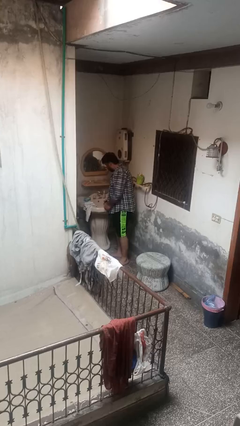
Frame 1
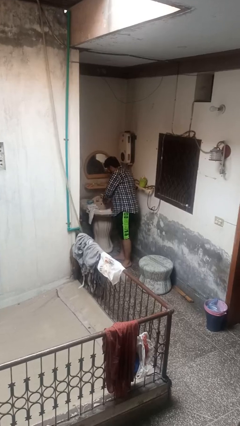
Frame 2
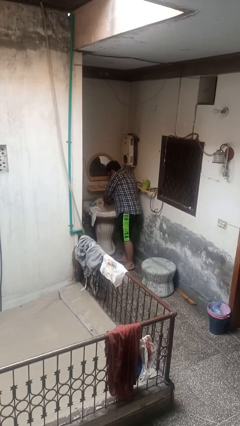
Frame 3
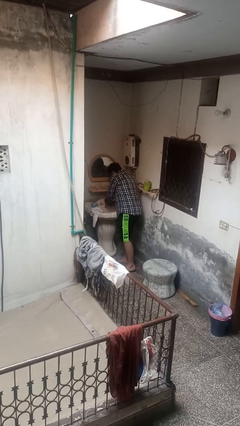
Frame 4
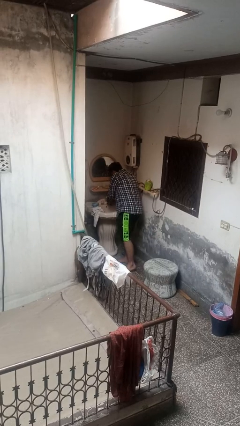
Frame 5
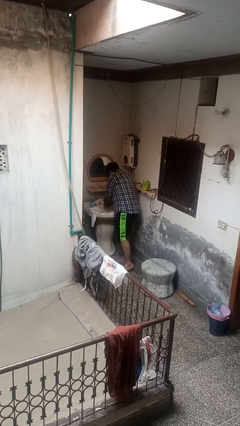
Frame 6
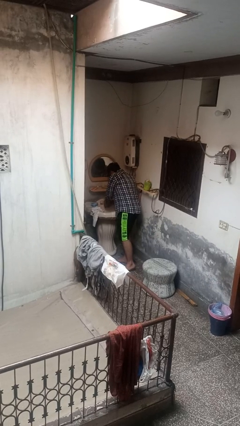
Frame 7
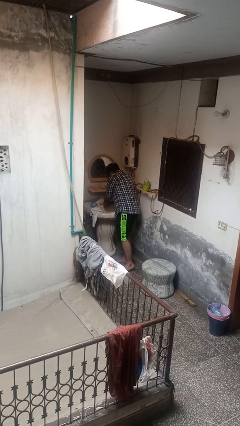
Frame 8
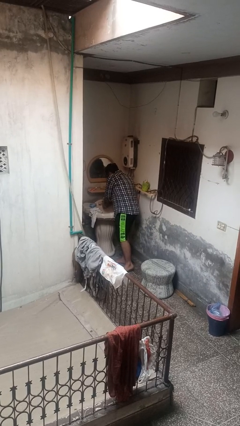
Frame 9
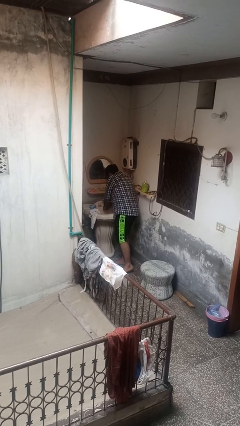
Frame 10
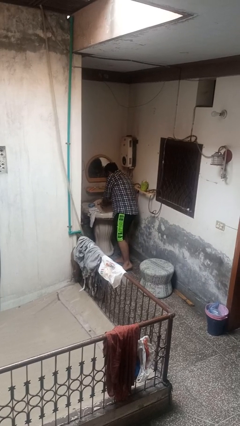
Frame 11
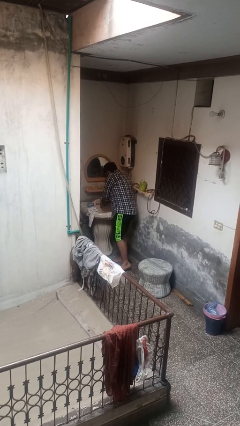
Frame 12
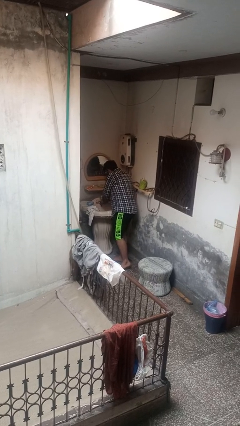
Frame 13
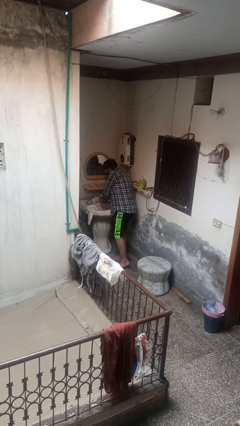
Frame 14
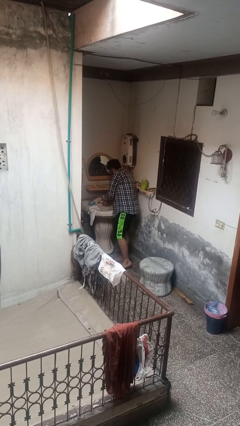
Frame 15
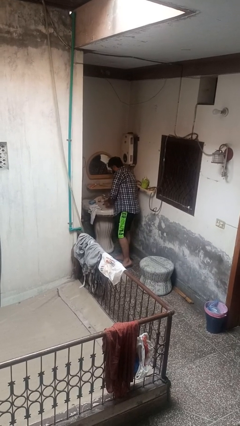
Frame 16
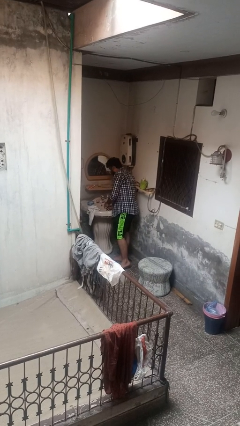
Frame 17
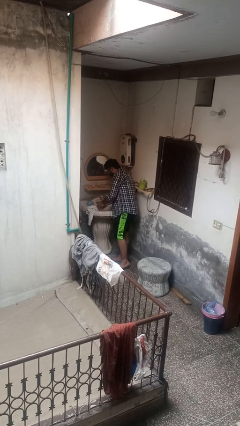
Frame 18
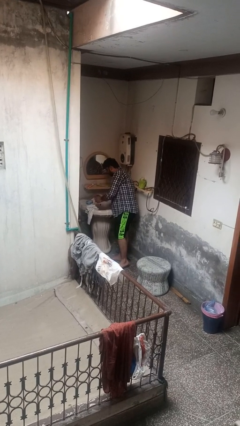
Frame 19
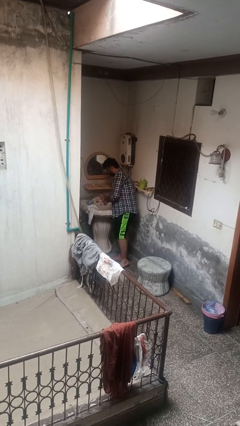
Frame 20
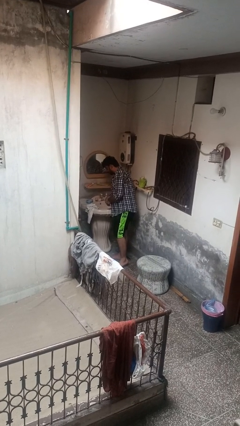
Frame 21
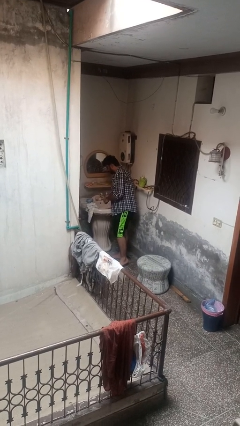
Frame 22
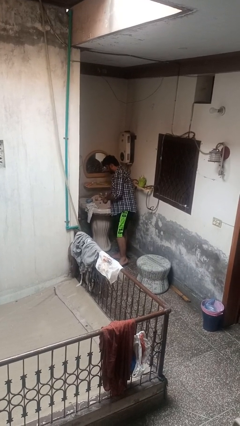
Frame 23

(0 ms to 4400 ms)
person washes hands

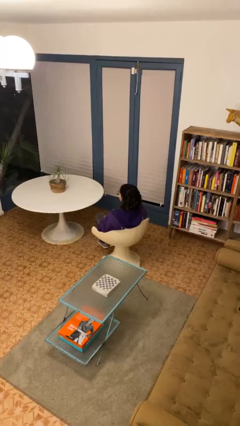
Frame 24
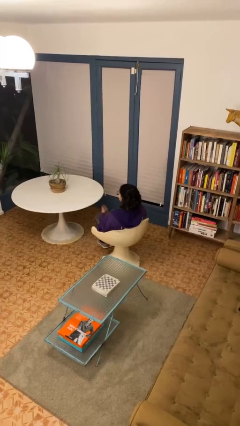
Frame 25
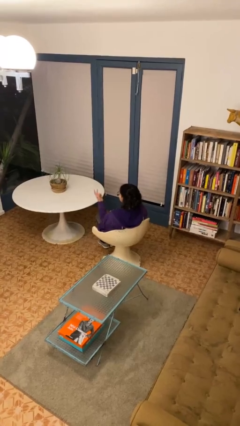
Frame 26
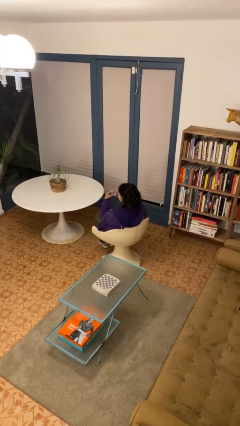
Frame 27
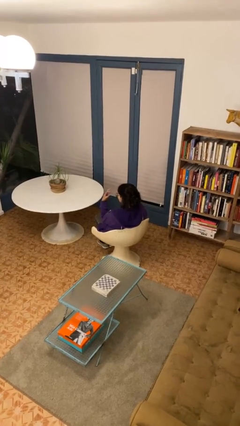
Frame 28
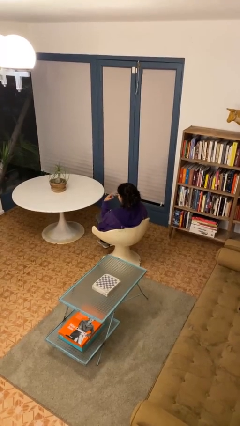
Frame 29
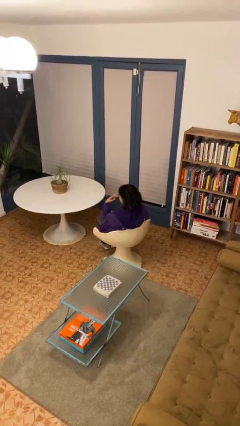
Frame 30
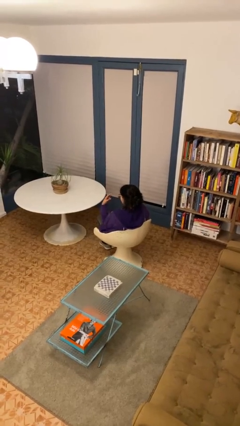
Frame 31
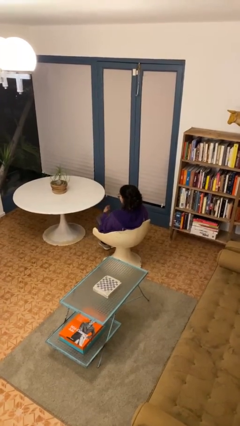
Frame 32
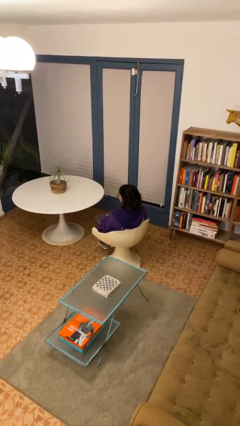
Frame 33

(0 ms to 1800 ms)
person gestures watch closely

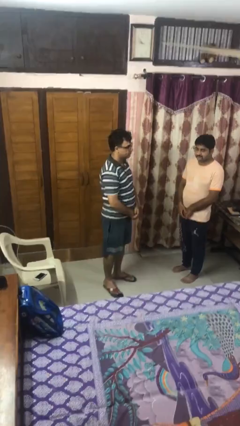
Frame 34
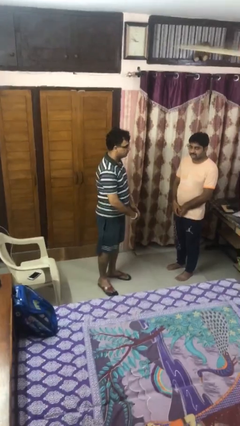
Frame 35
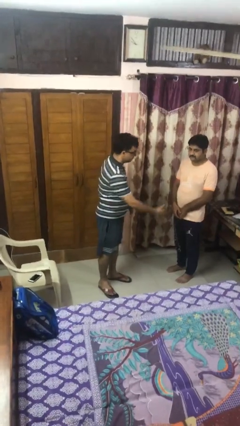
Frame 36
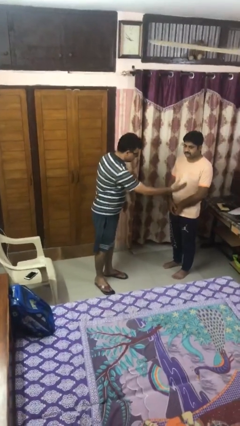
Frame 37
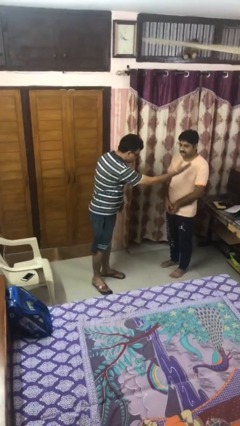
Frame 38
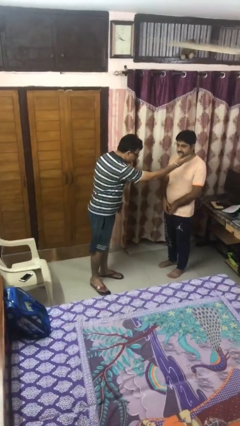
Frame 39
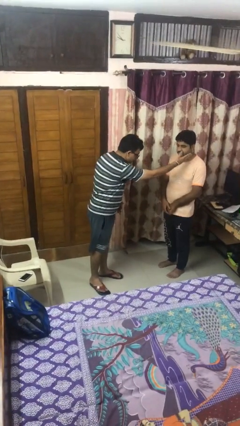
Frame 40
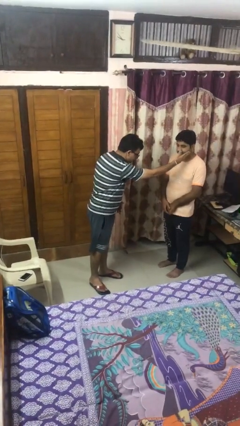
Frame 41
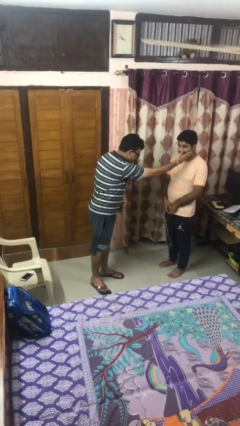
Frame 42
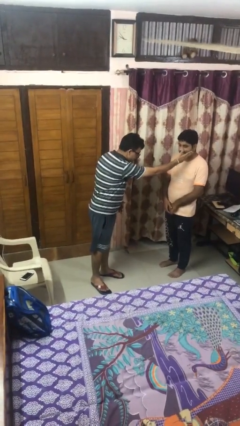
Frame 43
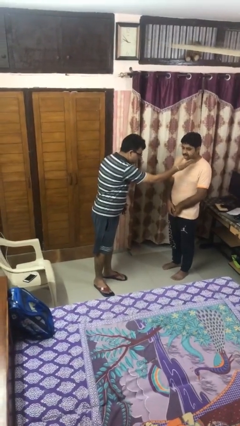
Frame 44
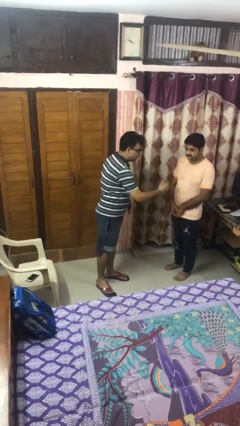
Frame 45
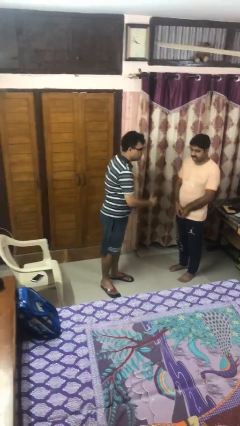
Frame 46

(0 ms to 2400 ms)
person touches face of person

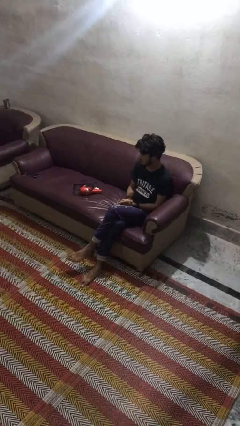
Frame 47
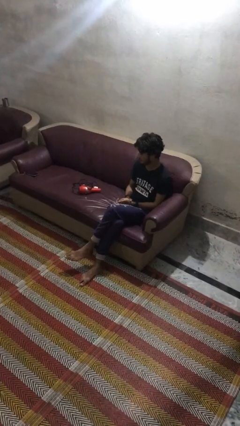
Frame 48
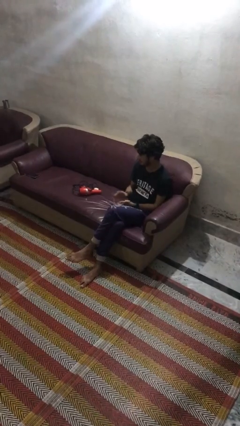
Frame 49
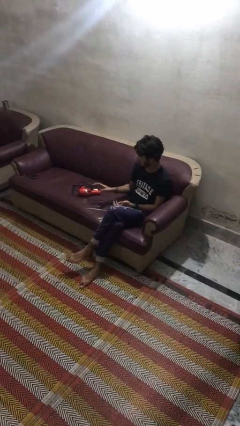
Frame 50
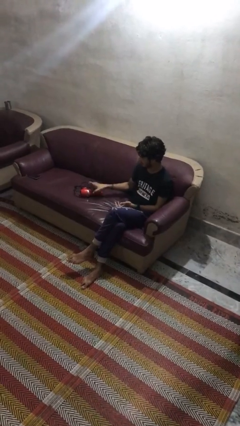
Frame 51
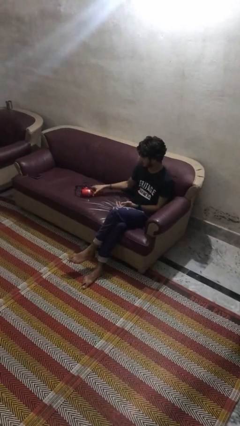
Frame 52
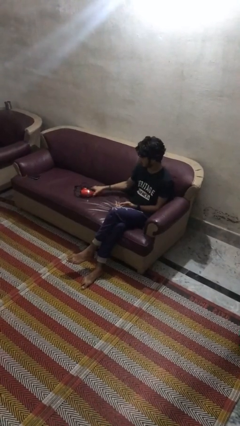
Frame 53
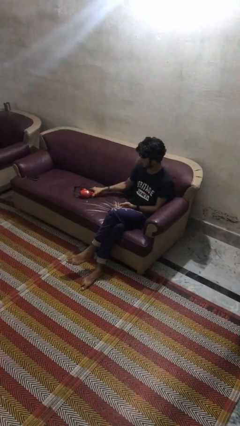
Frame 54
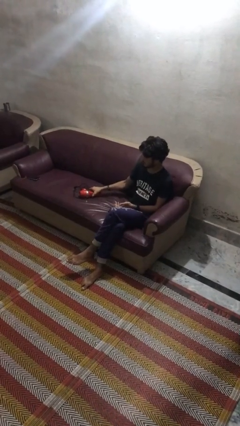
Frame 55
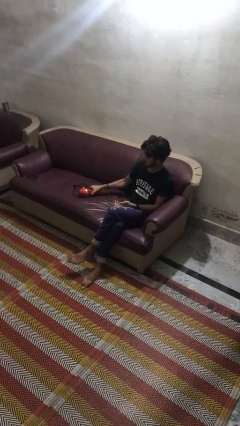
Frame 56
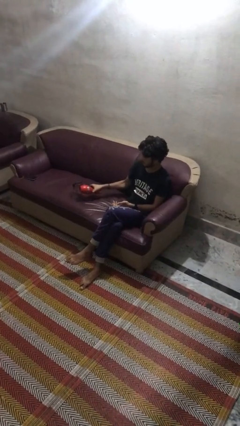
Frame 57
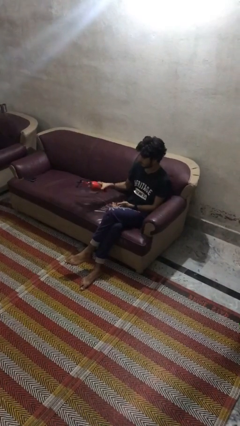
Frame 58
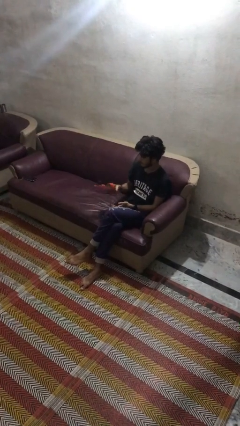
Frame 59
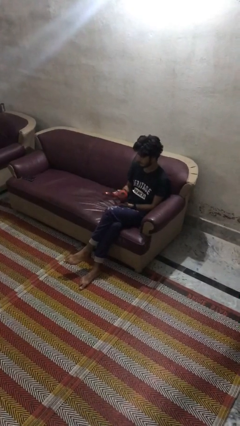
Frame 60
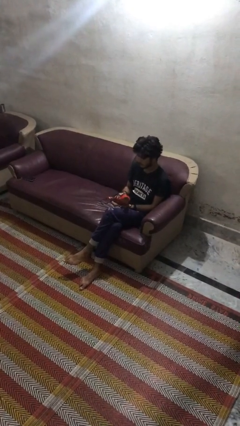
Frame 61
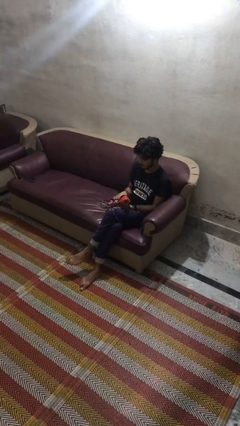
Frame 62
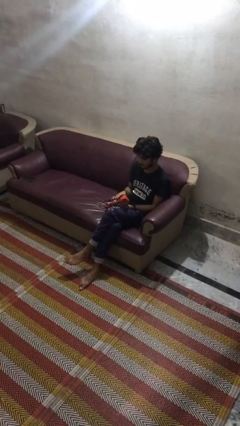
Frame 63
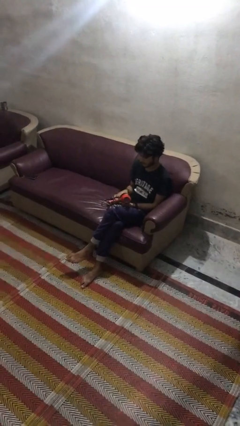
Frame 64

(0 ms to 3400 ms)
person picks up object from couch

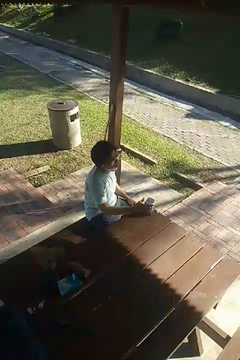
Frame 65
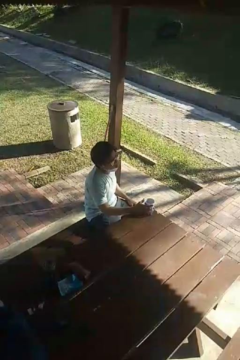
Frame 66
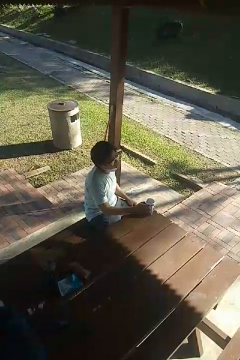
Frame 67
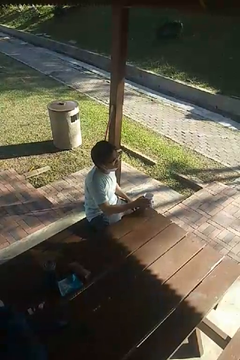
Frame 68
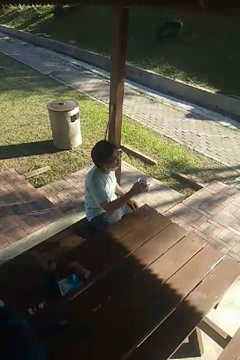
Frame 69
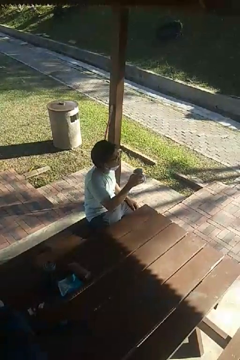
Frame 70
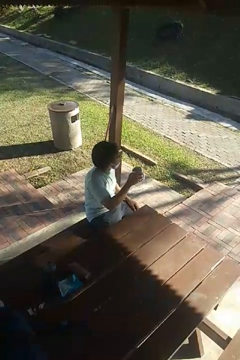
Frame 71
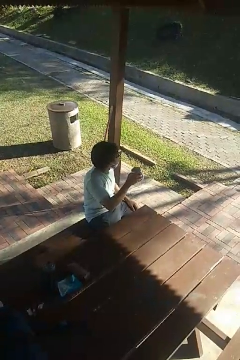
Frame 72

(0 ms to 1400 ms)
person picks up object from table

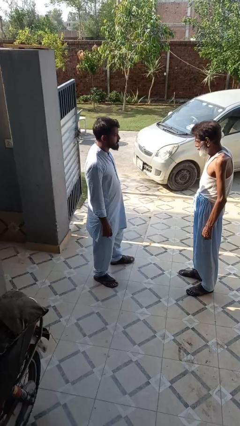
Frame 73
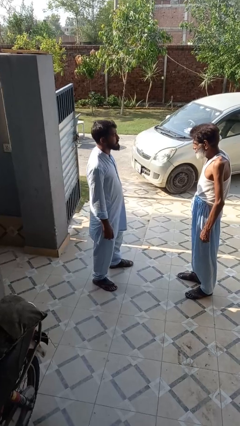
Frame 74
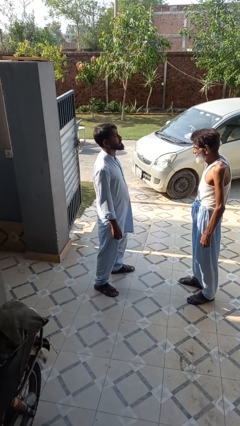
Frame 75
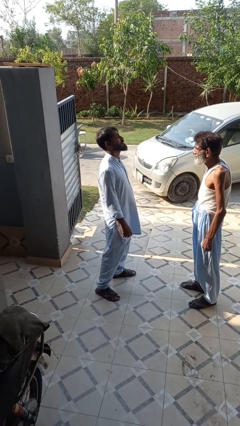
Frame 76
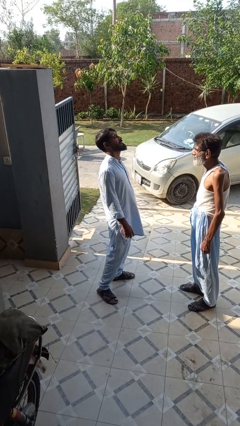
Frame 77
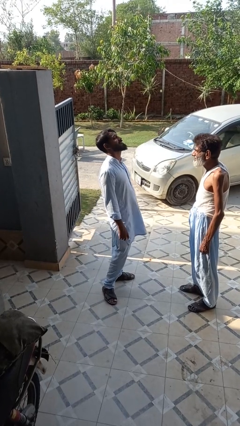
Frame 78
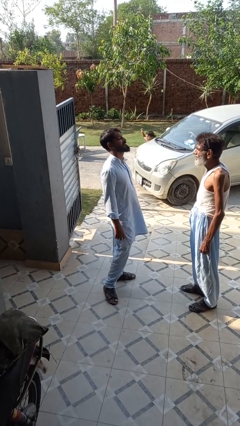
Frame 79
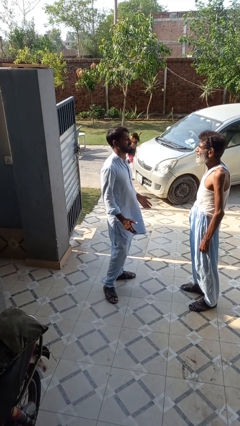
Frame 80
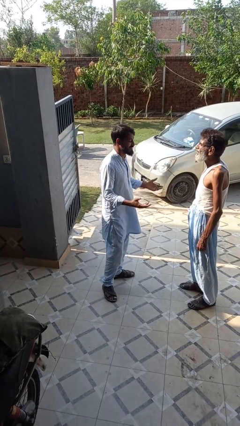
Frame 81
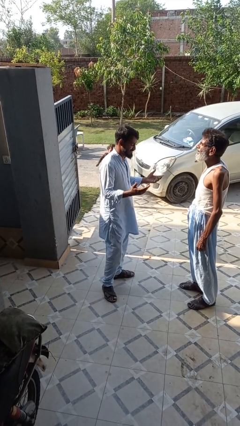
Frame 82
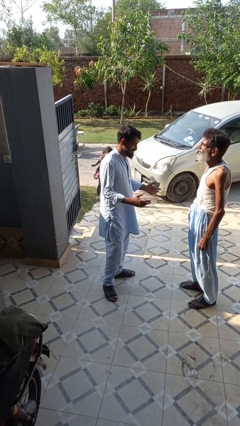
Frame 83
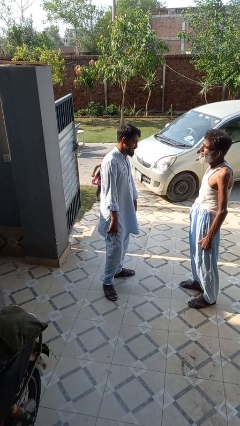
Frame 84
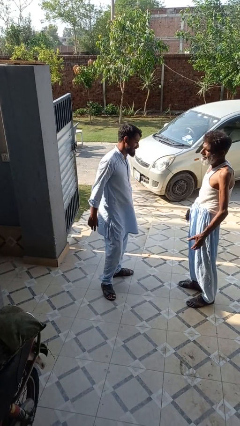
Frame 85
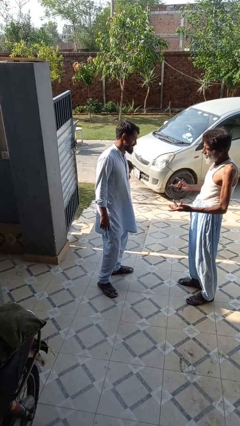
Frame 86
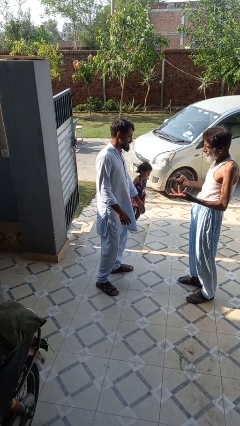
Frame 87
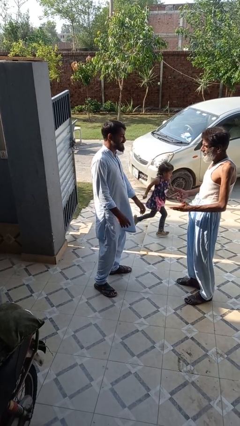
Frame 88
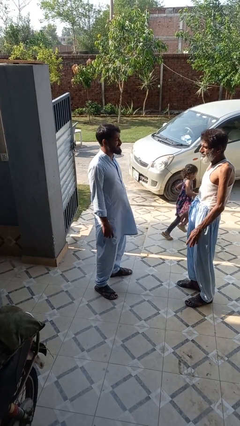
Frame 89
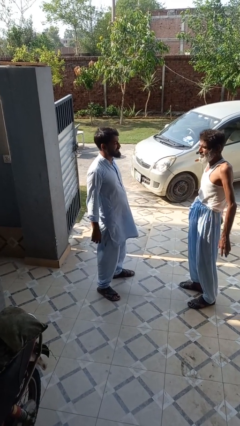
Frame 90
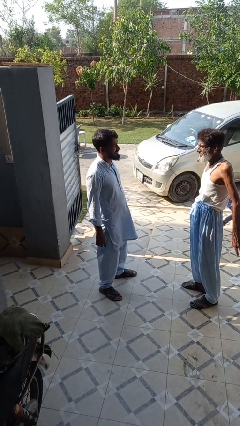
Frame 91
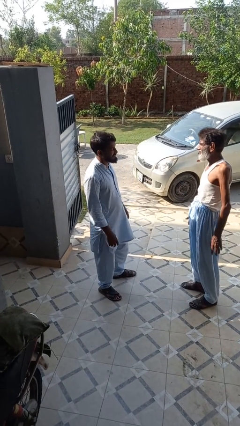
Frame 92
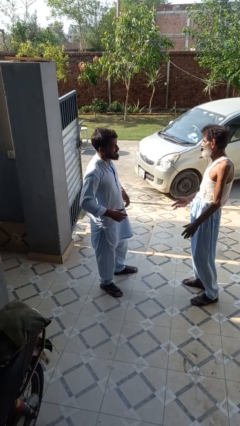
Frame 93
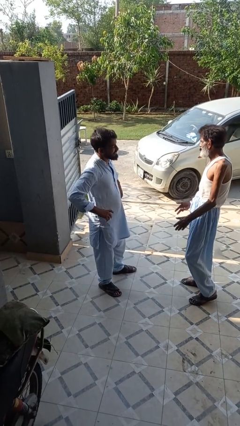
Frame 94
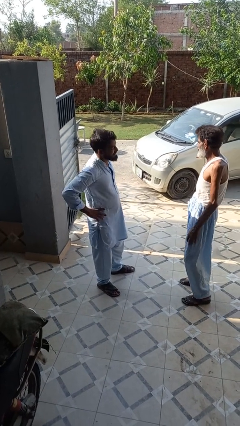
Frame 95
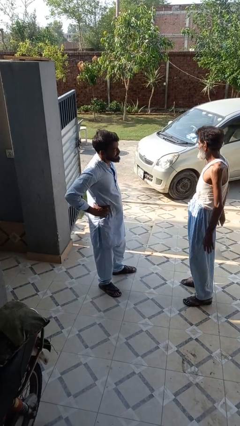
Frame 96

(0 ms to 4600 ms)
person laughs with person
